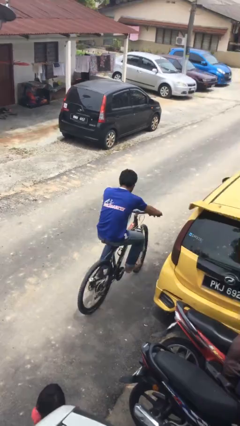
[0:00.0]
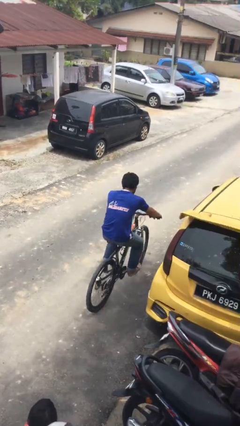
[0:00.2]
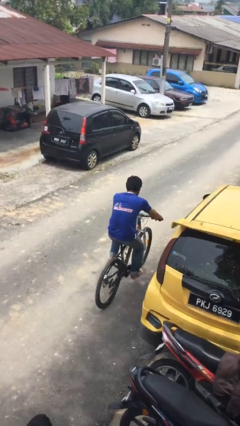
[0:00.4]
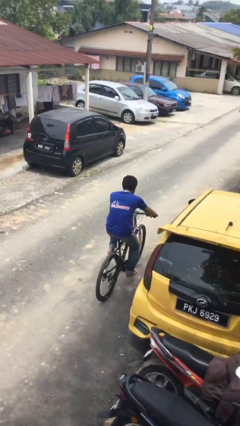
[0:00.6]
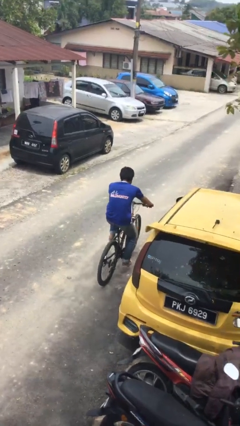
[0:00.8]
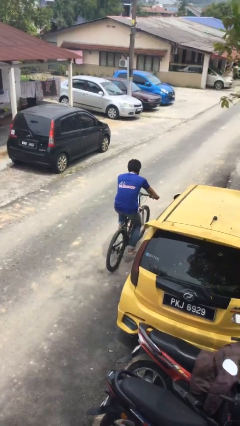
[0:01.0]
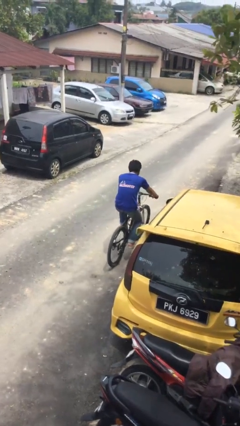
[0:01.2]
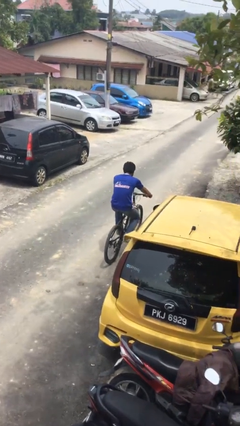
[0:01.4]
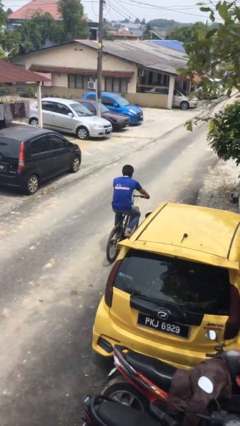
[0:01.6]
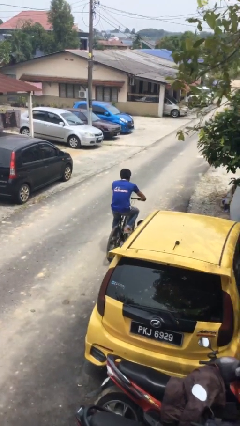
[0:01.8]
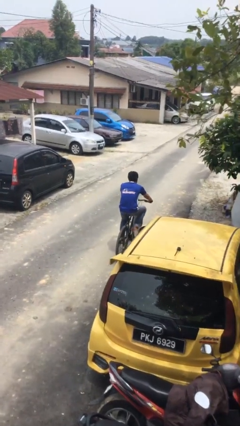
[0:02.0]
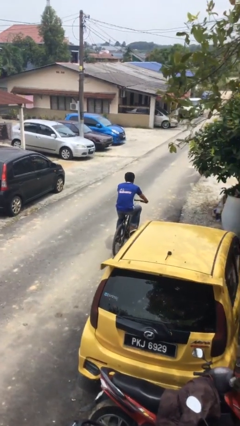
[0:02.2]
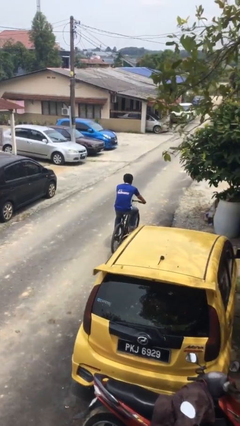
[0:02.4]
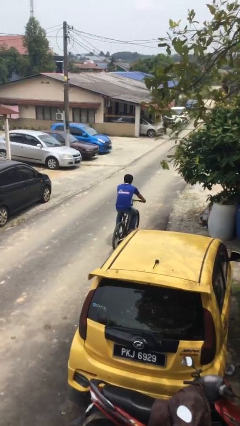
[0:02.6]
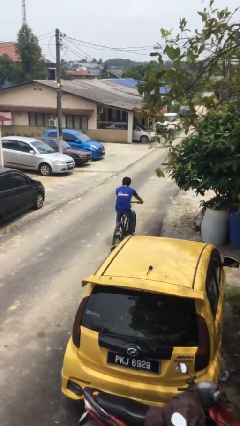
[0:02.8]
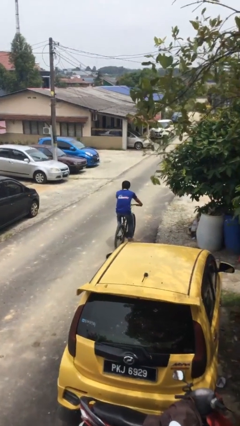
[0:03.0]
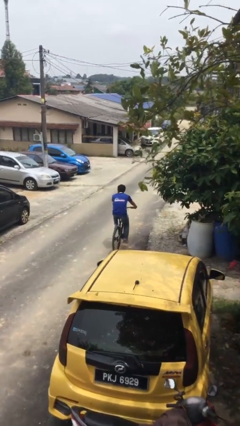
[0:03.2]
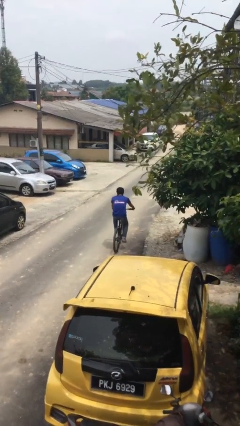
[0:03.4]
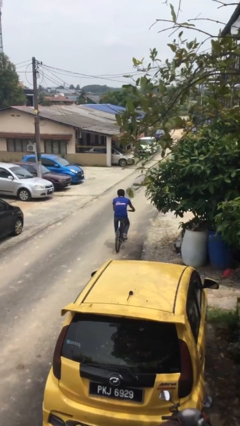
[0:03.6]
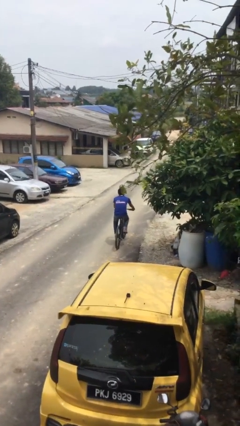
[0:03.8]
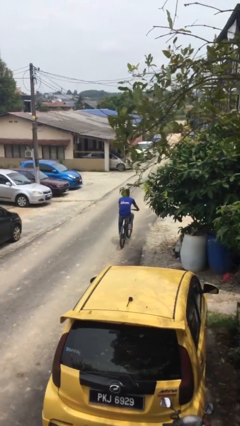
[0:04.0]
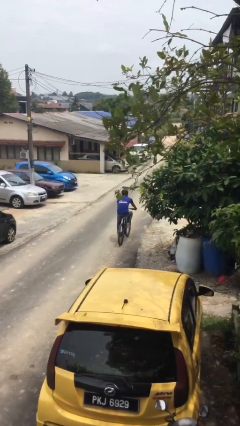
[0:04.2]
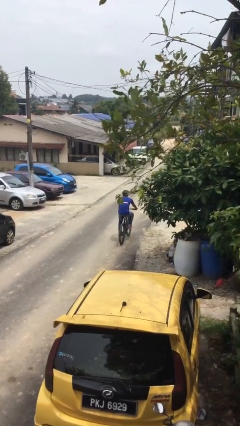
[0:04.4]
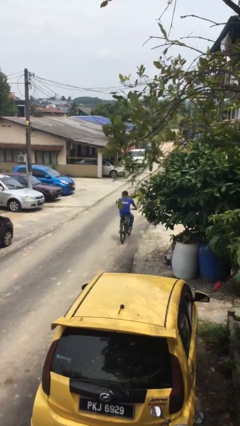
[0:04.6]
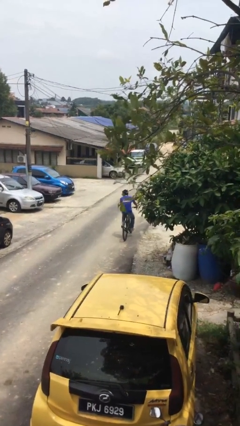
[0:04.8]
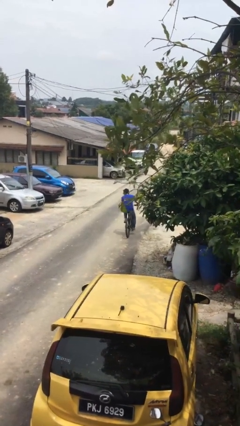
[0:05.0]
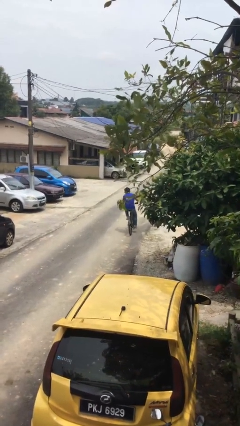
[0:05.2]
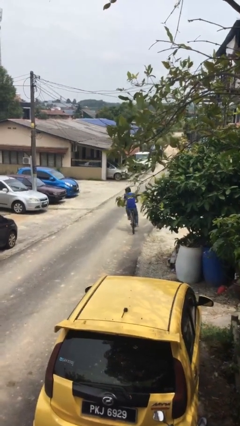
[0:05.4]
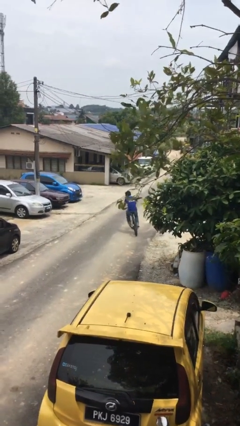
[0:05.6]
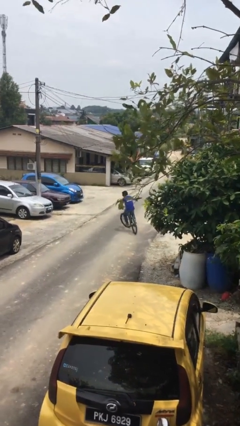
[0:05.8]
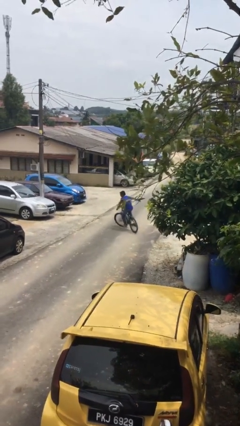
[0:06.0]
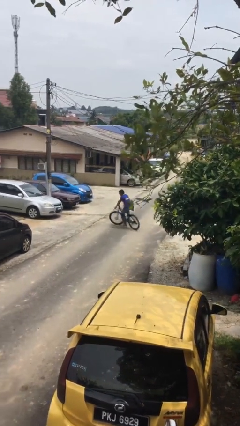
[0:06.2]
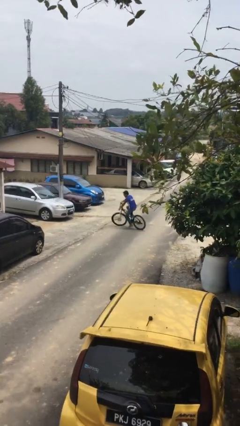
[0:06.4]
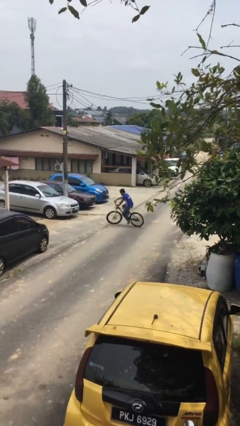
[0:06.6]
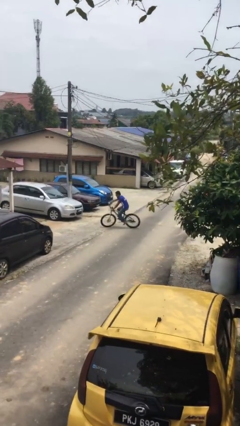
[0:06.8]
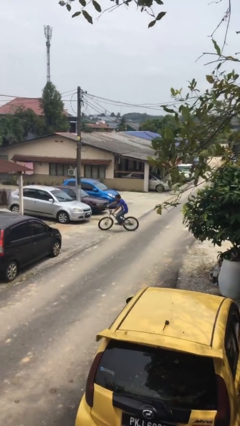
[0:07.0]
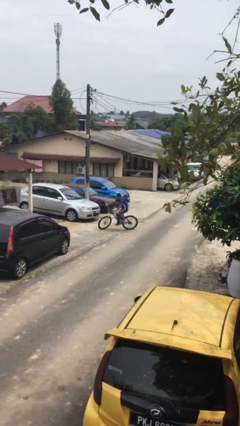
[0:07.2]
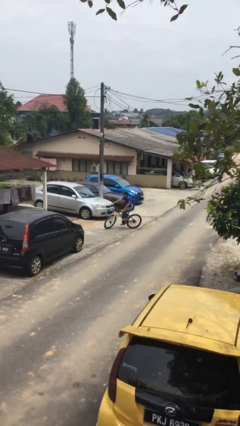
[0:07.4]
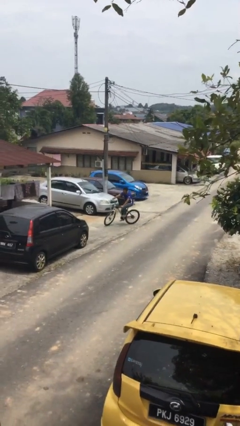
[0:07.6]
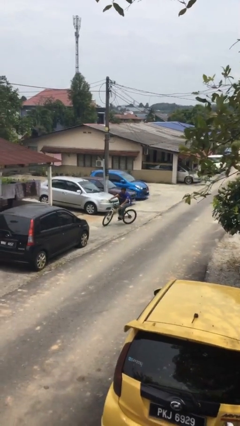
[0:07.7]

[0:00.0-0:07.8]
person rides bicycle

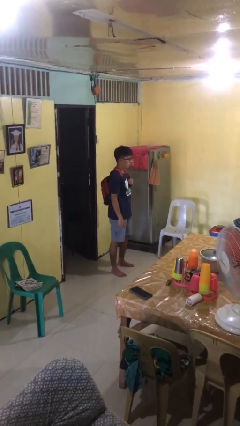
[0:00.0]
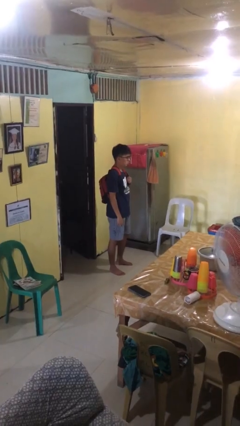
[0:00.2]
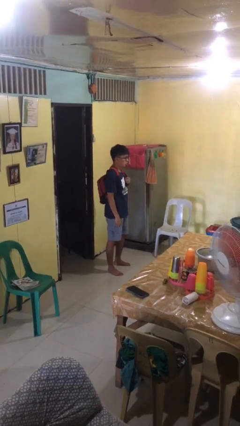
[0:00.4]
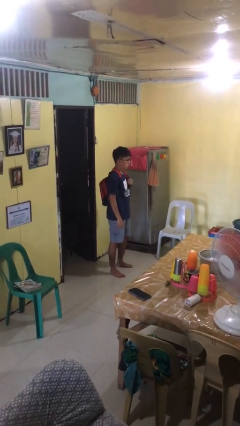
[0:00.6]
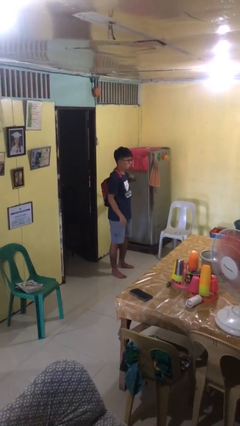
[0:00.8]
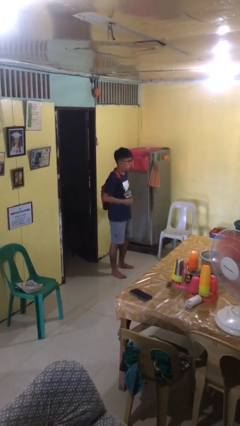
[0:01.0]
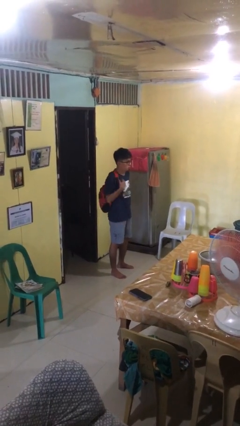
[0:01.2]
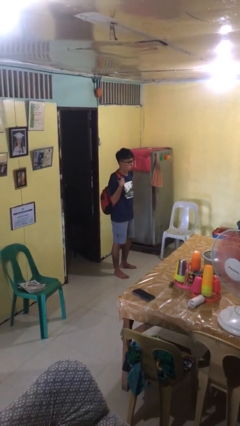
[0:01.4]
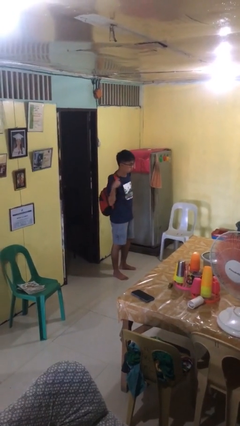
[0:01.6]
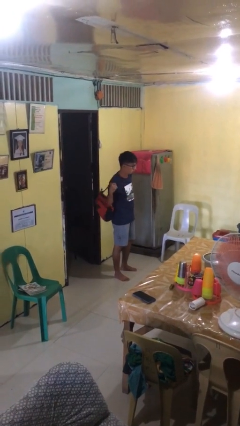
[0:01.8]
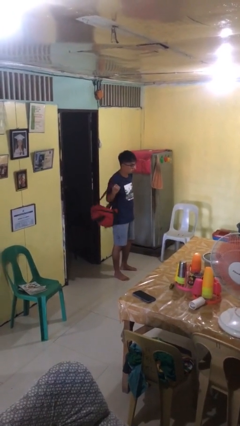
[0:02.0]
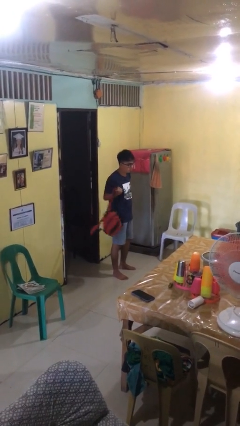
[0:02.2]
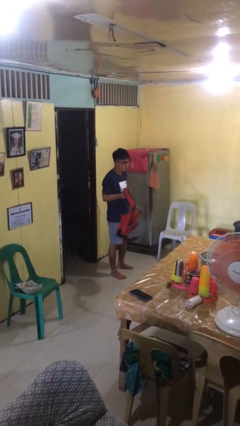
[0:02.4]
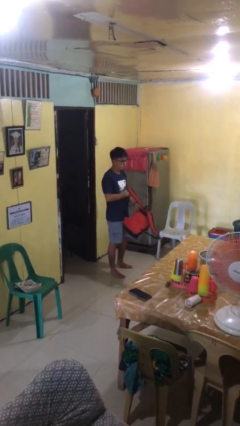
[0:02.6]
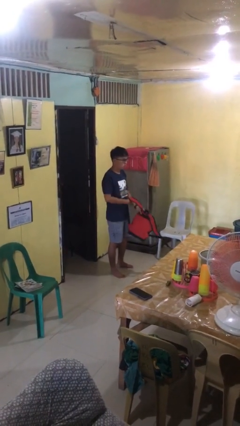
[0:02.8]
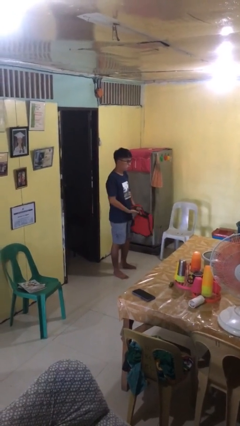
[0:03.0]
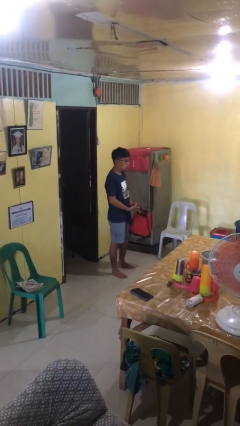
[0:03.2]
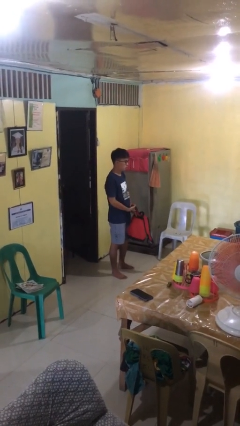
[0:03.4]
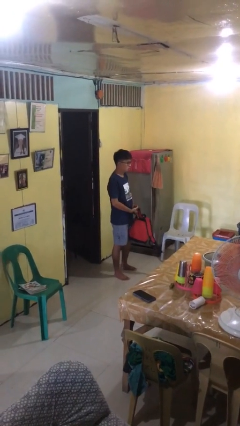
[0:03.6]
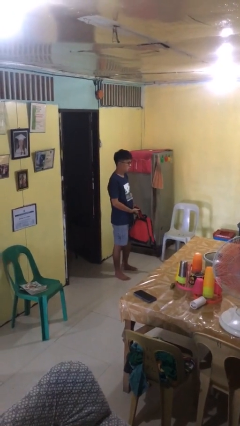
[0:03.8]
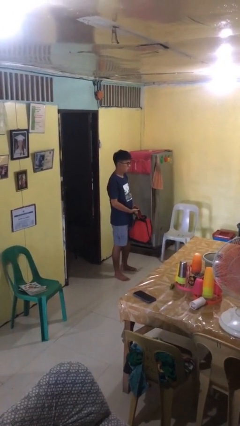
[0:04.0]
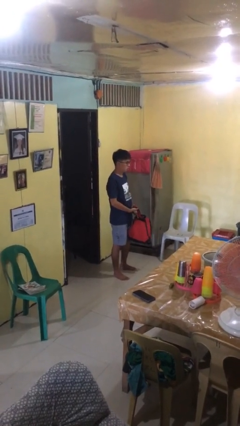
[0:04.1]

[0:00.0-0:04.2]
person takes off backpack

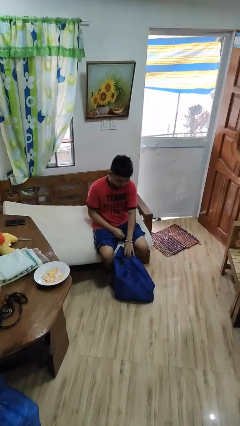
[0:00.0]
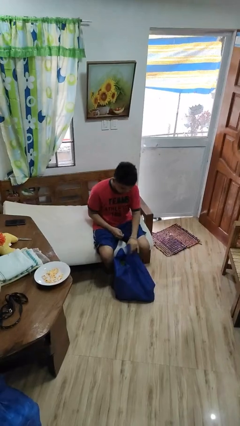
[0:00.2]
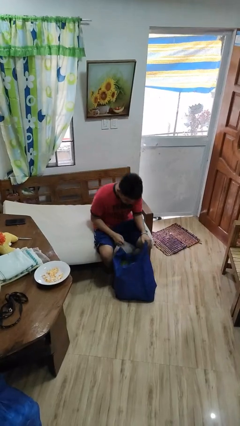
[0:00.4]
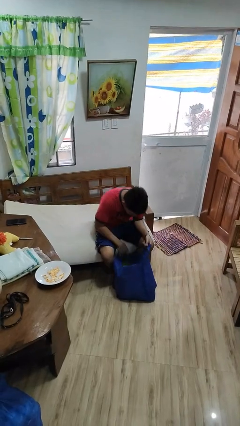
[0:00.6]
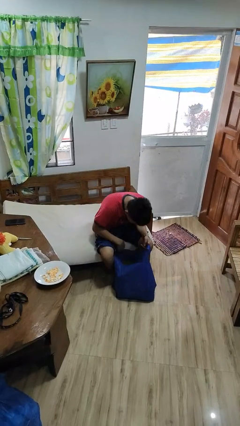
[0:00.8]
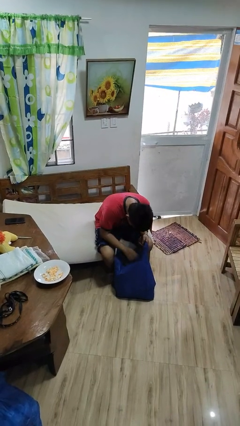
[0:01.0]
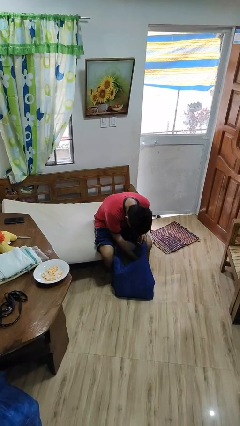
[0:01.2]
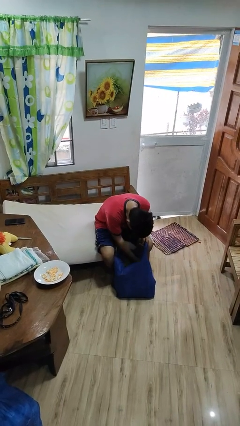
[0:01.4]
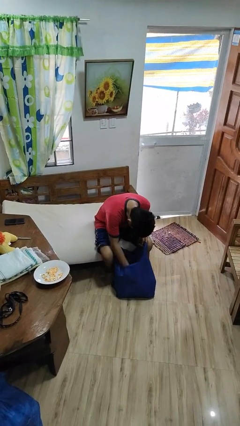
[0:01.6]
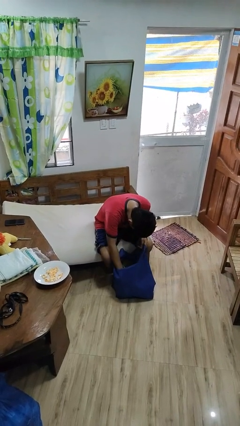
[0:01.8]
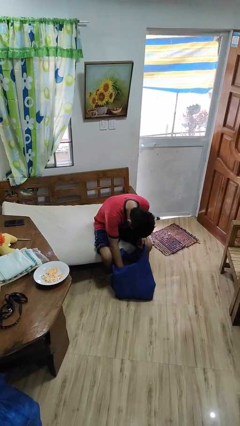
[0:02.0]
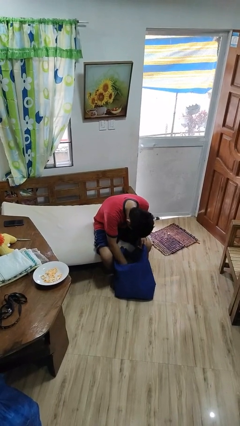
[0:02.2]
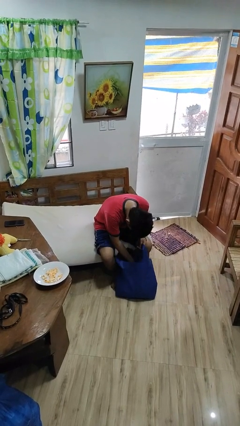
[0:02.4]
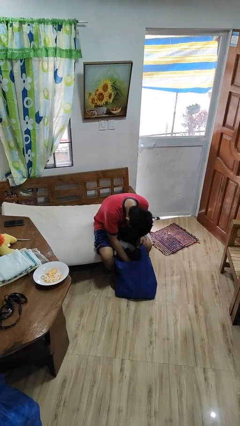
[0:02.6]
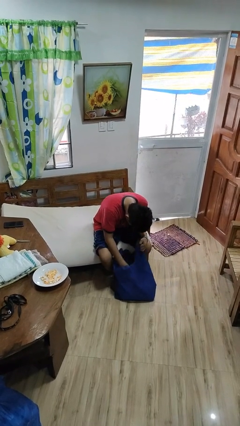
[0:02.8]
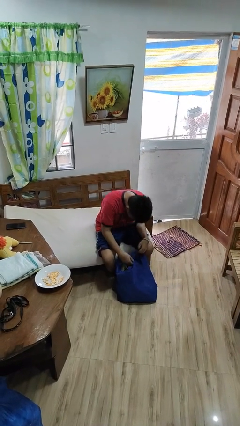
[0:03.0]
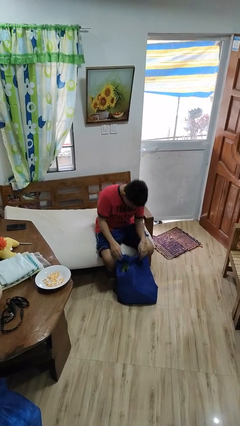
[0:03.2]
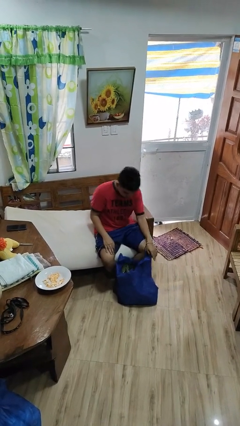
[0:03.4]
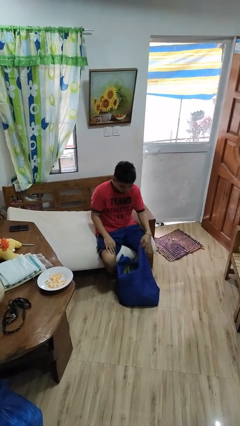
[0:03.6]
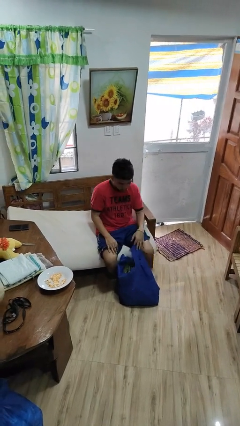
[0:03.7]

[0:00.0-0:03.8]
person searches in bag

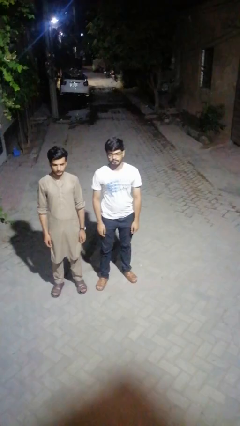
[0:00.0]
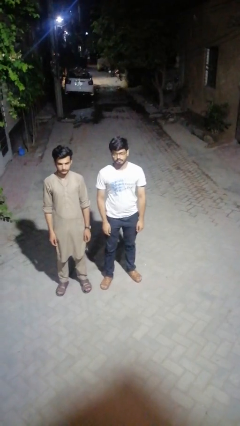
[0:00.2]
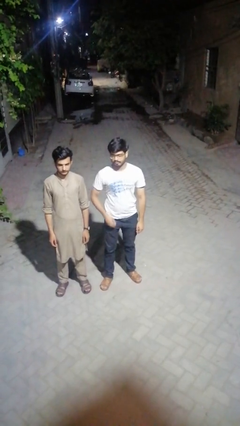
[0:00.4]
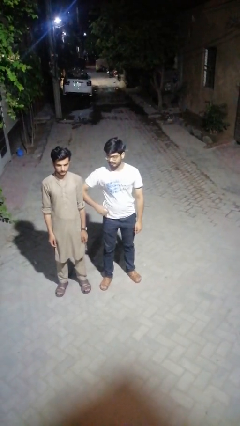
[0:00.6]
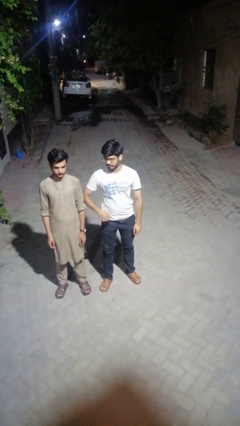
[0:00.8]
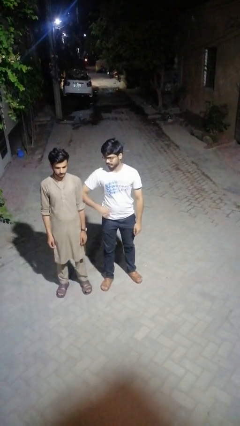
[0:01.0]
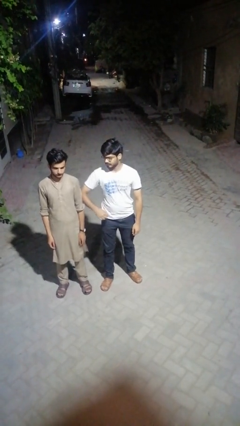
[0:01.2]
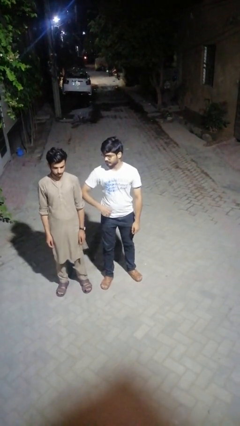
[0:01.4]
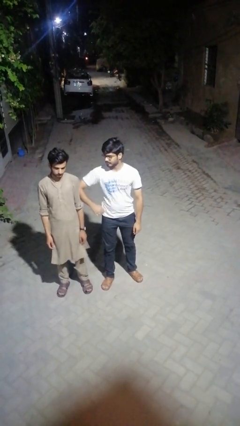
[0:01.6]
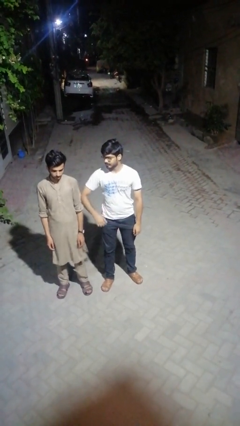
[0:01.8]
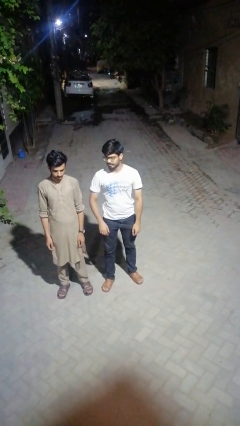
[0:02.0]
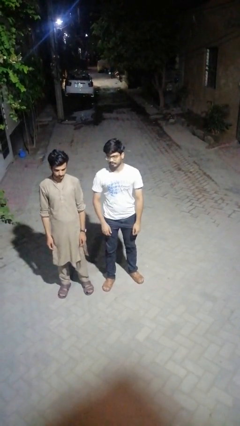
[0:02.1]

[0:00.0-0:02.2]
person nudges person with elbow
